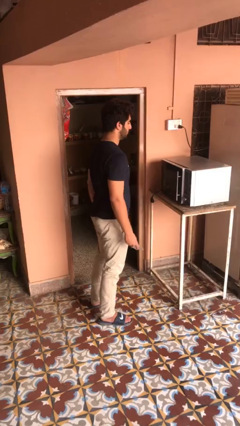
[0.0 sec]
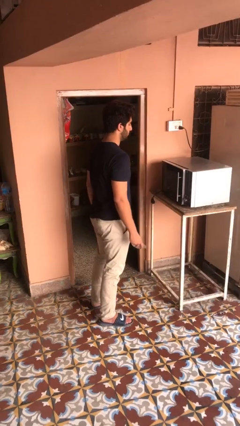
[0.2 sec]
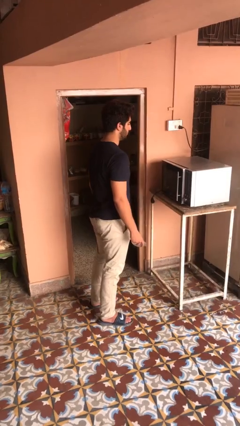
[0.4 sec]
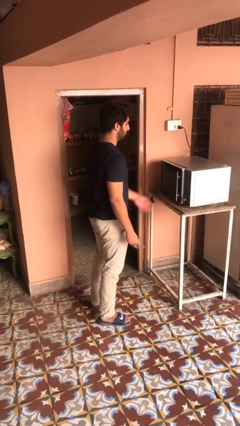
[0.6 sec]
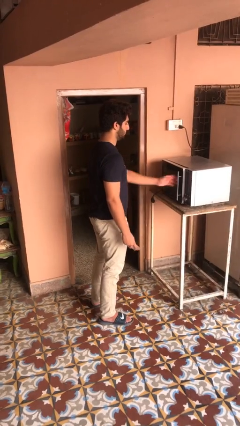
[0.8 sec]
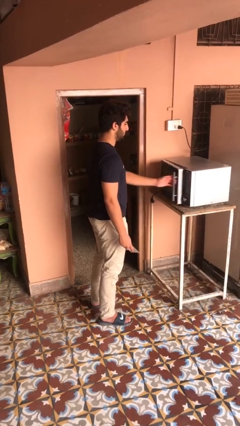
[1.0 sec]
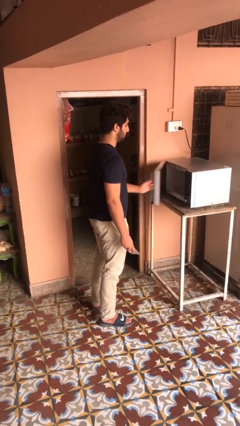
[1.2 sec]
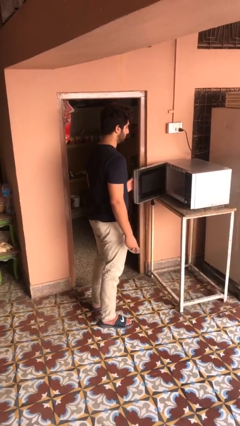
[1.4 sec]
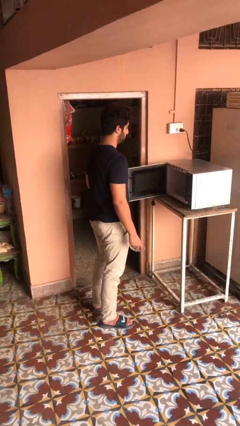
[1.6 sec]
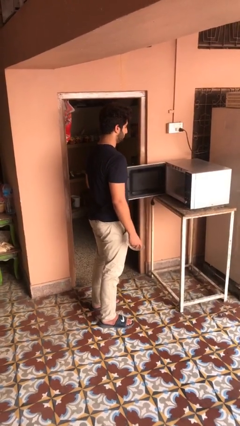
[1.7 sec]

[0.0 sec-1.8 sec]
person opens microwave

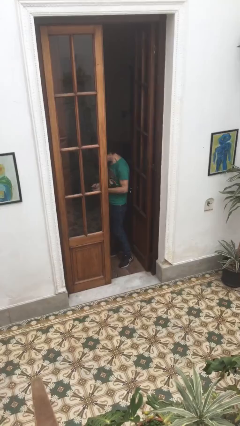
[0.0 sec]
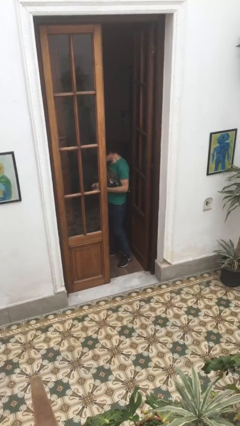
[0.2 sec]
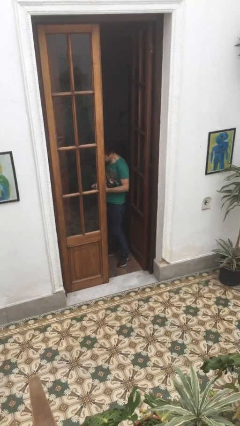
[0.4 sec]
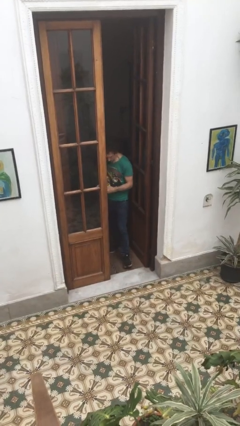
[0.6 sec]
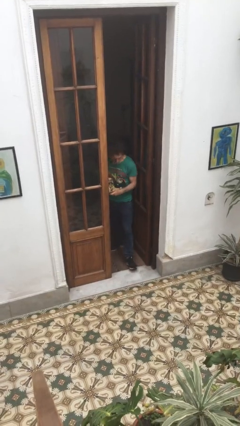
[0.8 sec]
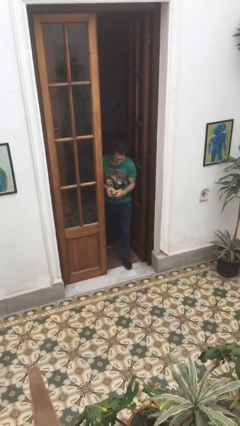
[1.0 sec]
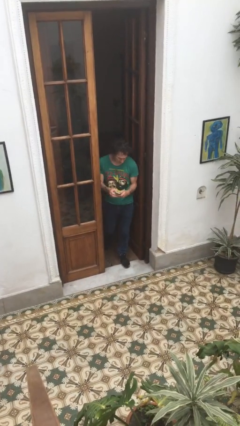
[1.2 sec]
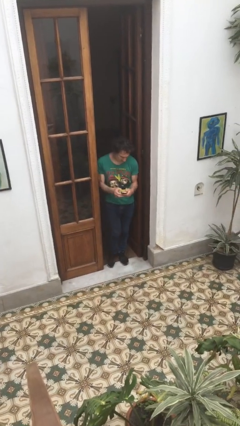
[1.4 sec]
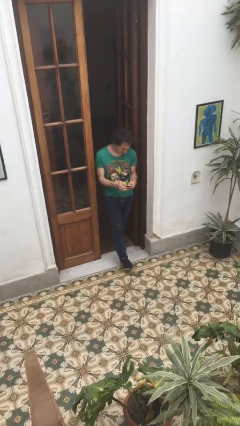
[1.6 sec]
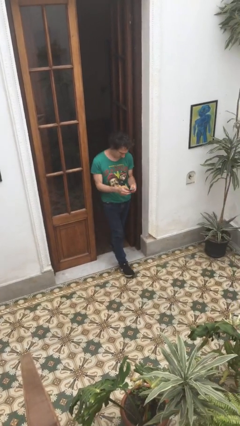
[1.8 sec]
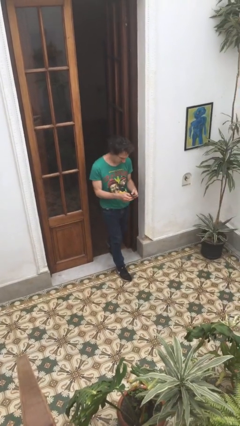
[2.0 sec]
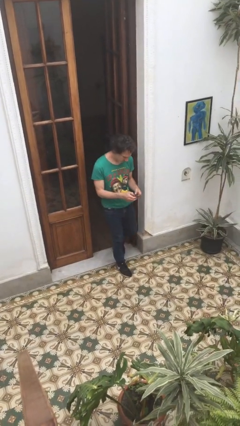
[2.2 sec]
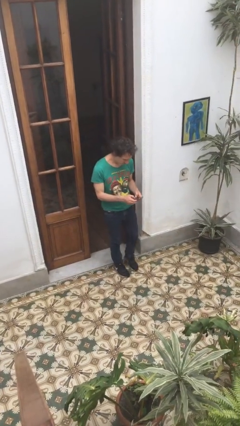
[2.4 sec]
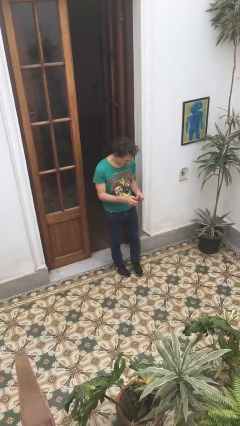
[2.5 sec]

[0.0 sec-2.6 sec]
person enters scene through structure

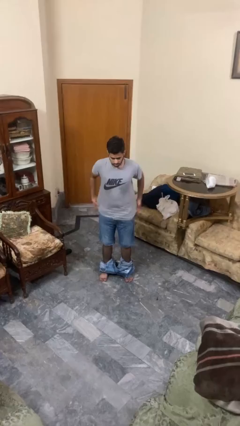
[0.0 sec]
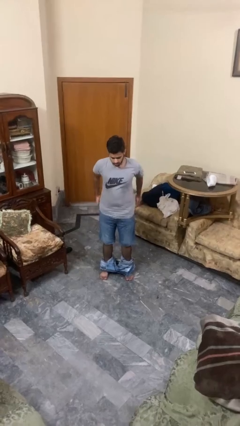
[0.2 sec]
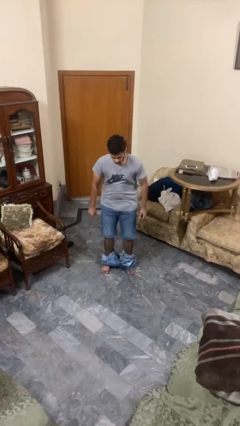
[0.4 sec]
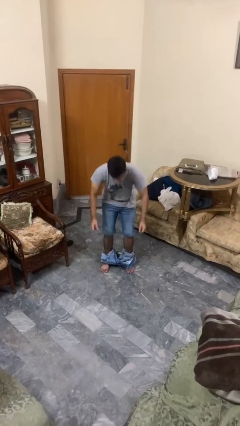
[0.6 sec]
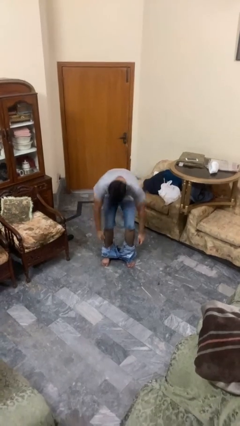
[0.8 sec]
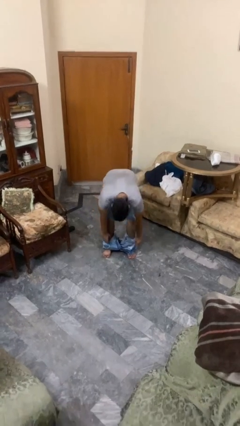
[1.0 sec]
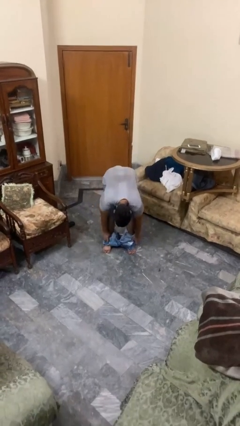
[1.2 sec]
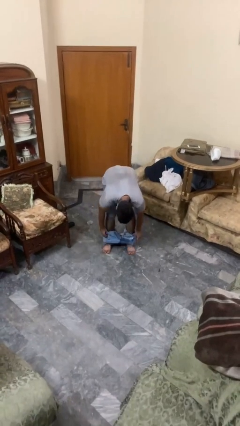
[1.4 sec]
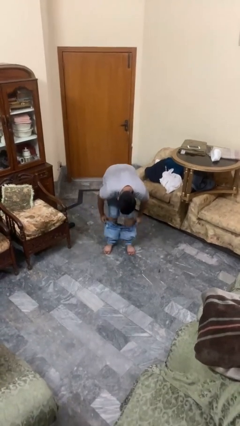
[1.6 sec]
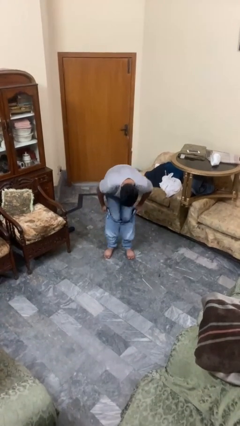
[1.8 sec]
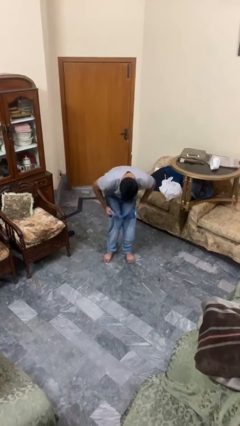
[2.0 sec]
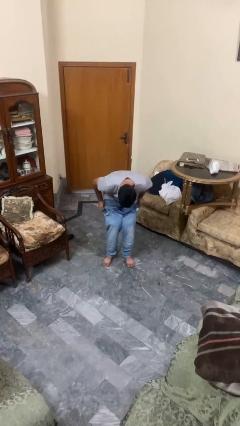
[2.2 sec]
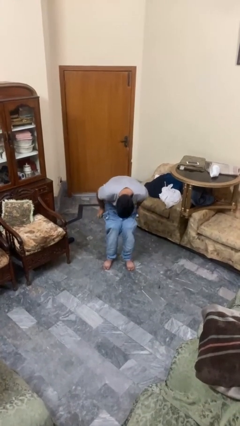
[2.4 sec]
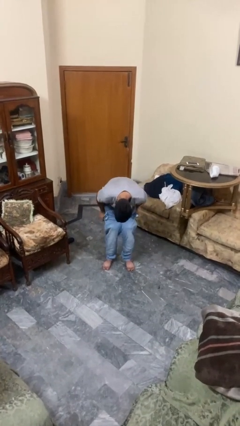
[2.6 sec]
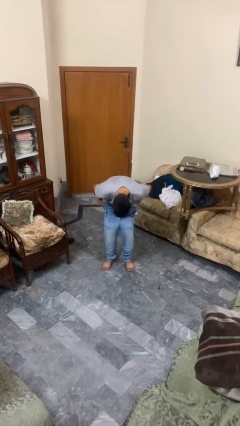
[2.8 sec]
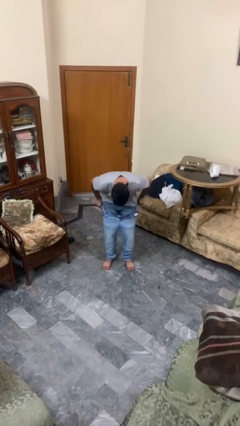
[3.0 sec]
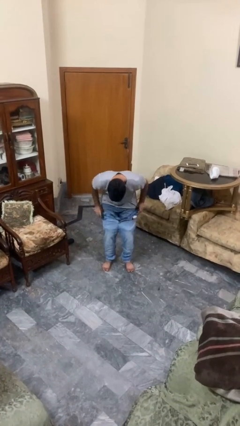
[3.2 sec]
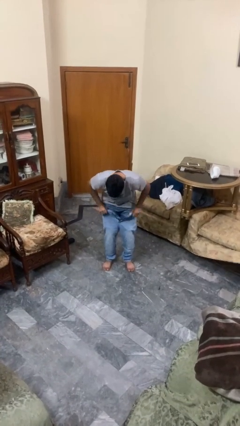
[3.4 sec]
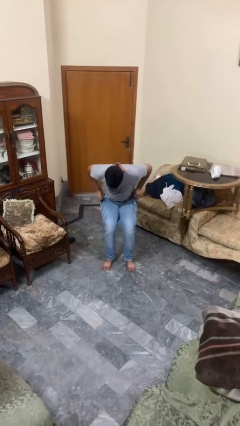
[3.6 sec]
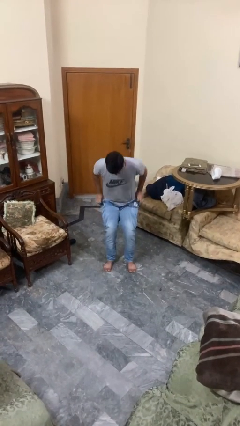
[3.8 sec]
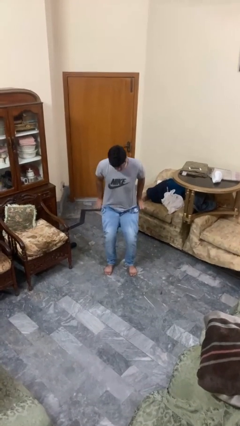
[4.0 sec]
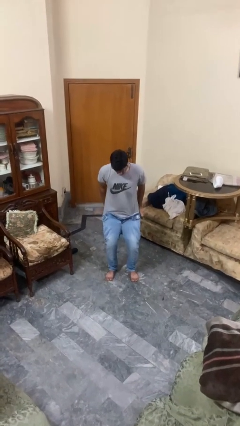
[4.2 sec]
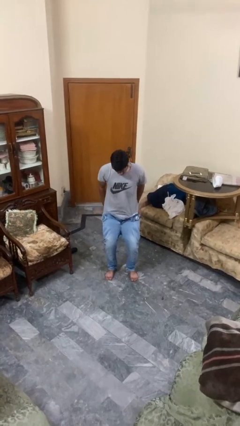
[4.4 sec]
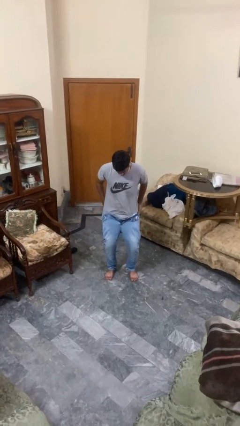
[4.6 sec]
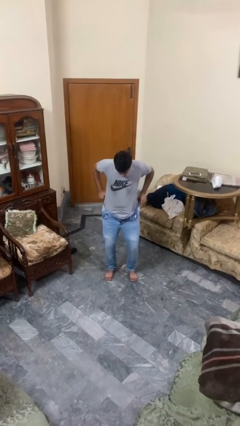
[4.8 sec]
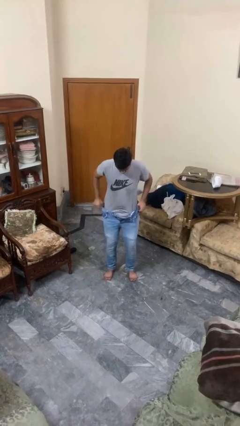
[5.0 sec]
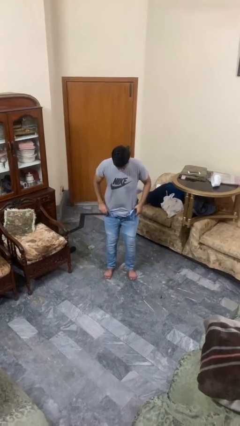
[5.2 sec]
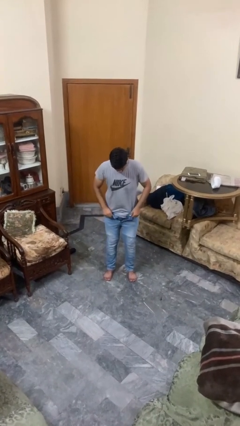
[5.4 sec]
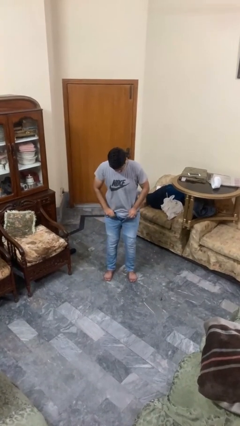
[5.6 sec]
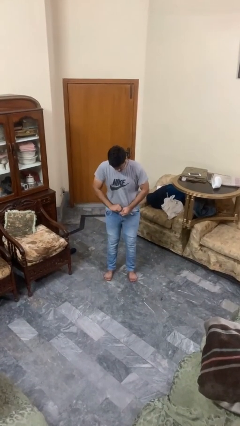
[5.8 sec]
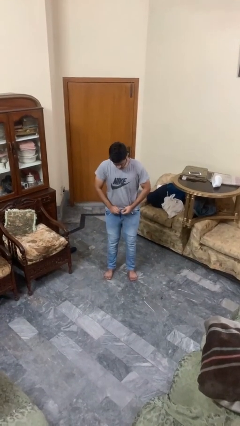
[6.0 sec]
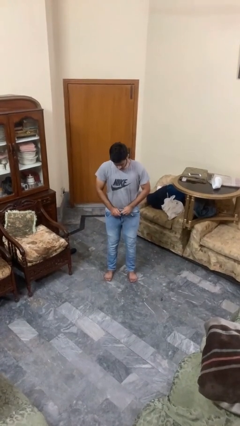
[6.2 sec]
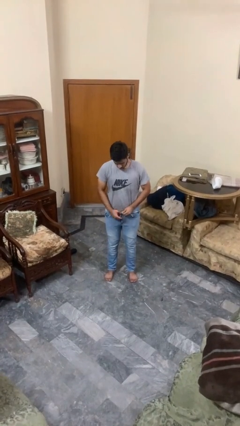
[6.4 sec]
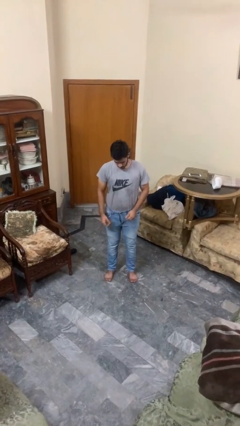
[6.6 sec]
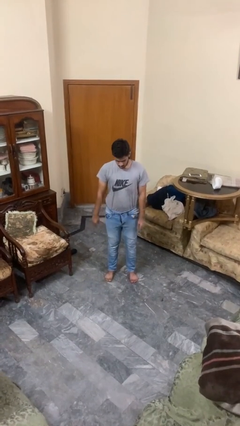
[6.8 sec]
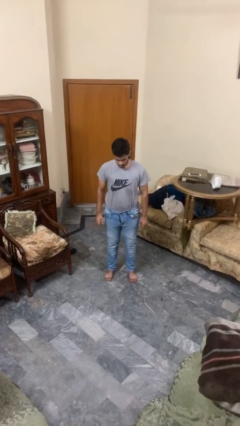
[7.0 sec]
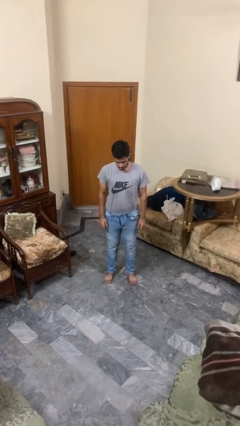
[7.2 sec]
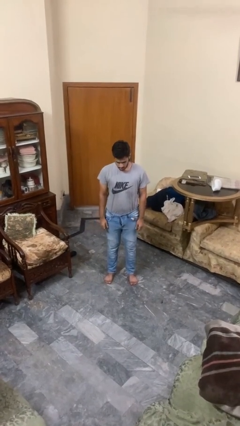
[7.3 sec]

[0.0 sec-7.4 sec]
person puts on pants

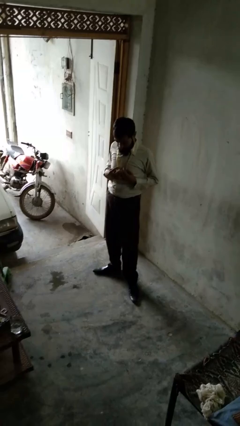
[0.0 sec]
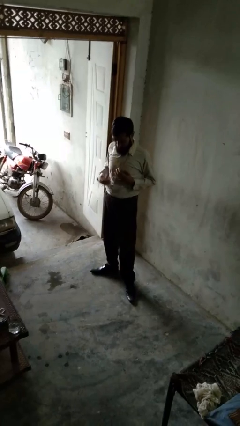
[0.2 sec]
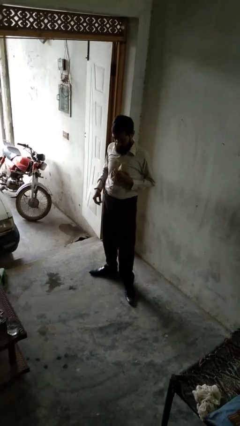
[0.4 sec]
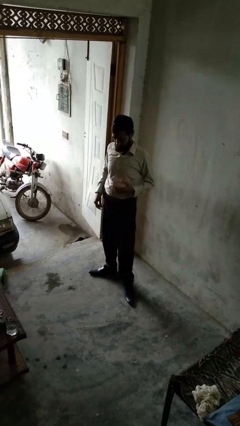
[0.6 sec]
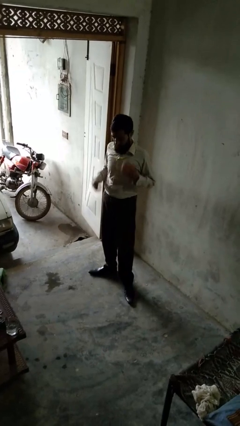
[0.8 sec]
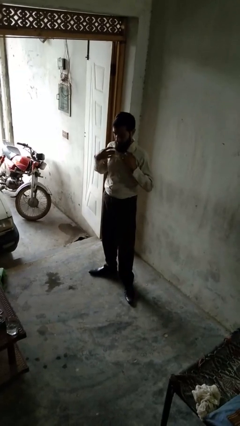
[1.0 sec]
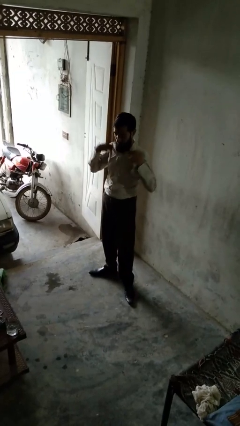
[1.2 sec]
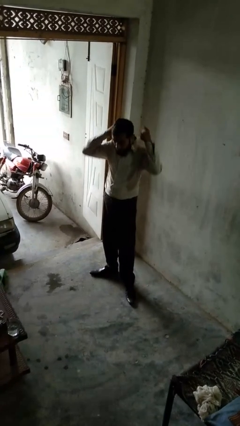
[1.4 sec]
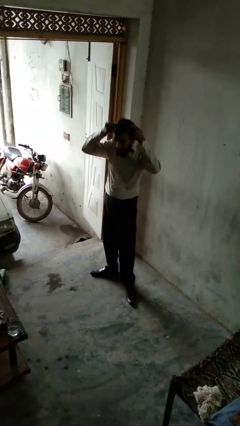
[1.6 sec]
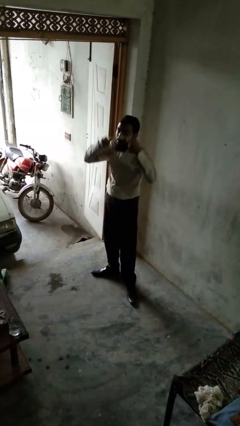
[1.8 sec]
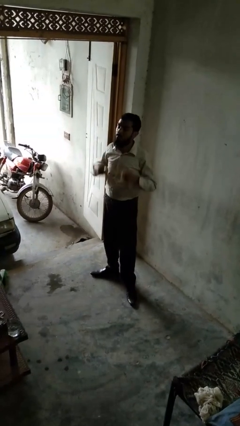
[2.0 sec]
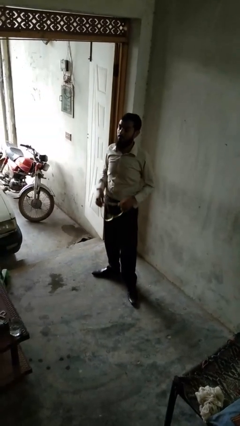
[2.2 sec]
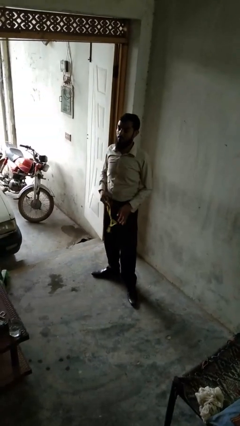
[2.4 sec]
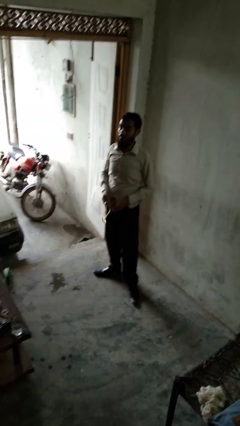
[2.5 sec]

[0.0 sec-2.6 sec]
person takes off necklace

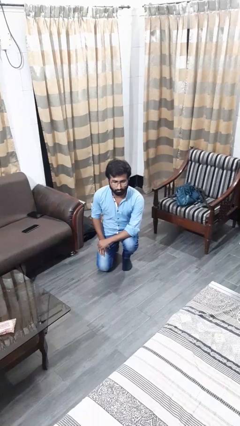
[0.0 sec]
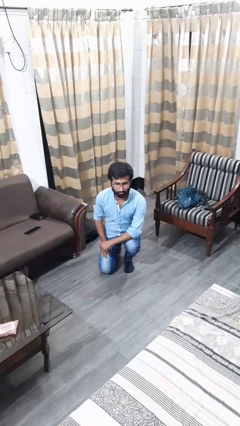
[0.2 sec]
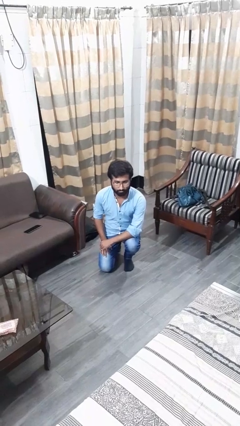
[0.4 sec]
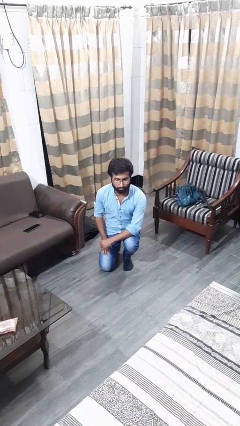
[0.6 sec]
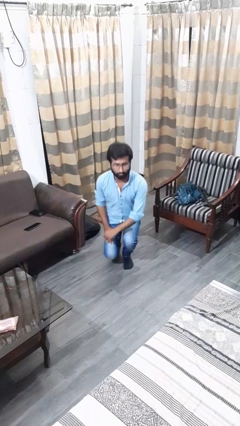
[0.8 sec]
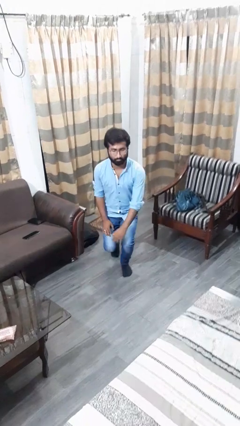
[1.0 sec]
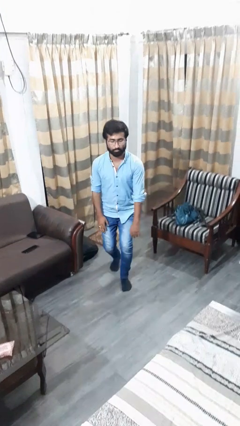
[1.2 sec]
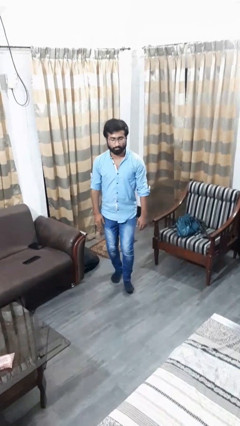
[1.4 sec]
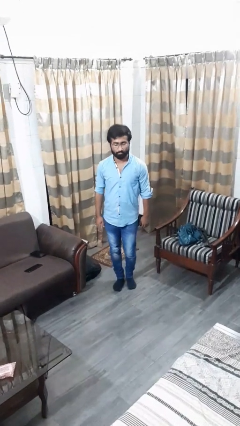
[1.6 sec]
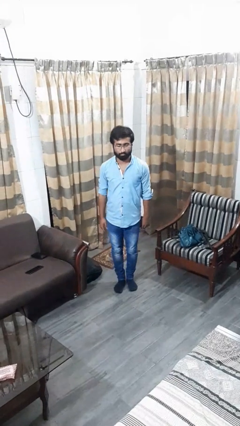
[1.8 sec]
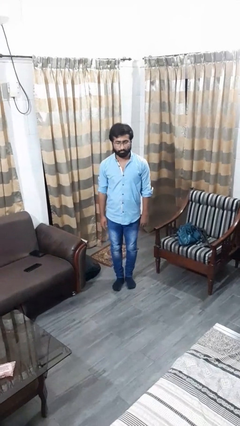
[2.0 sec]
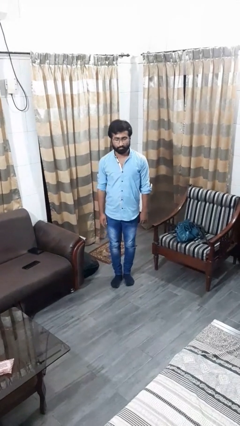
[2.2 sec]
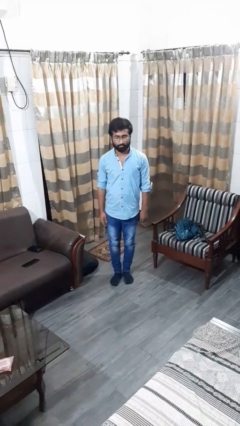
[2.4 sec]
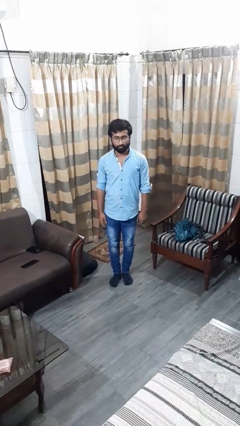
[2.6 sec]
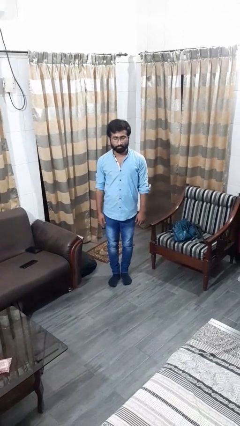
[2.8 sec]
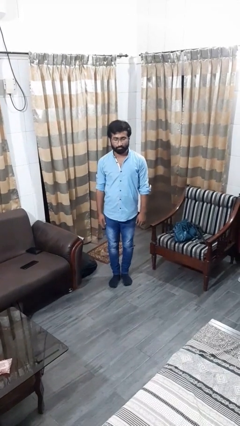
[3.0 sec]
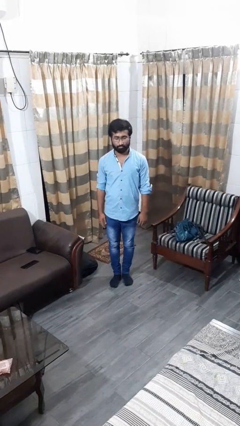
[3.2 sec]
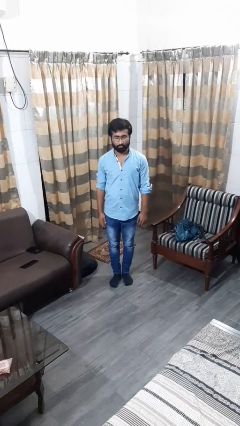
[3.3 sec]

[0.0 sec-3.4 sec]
person stands up from floor

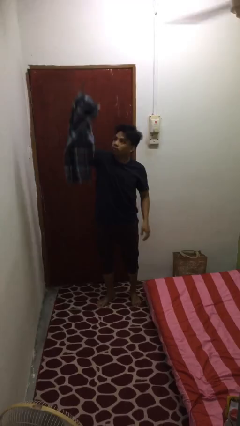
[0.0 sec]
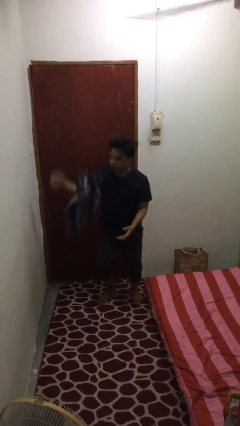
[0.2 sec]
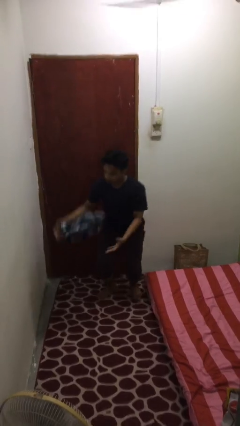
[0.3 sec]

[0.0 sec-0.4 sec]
person drops object
